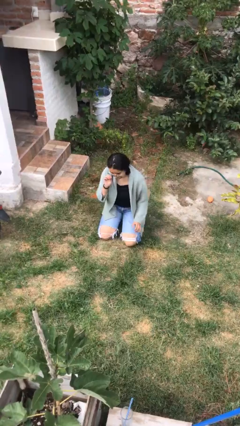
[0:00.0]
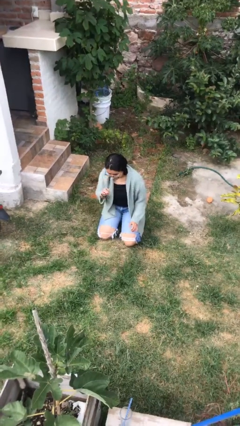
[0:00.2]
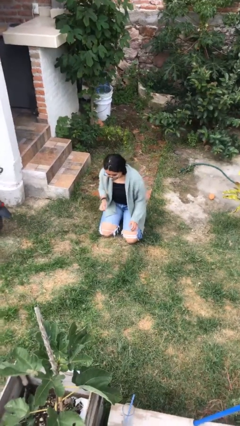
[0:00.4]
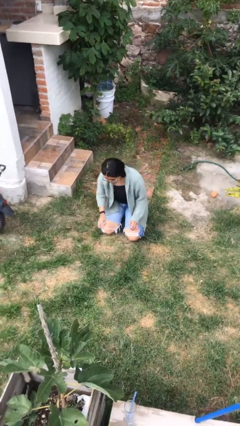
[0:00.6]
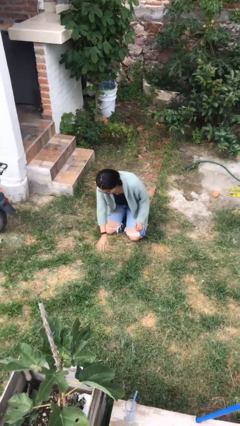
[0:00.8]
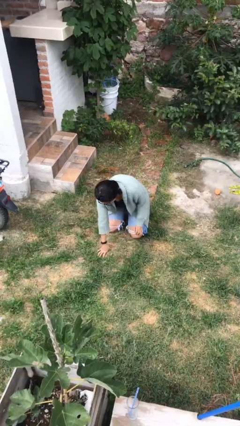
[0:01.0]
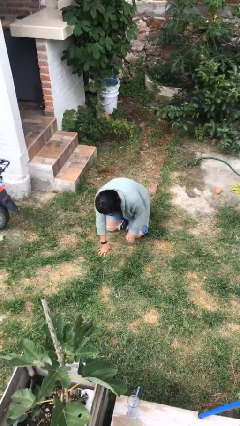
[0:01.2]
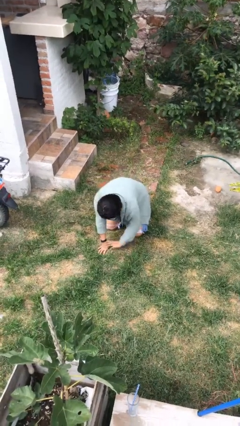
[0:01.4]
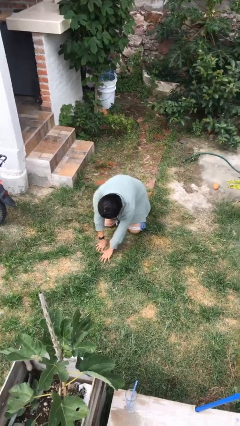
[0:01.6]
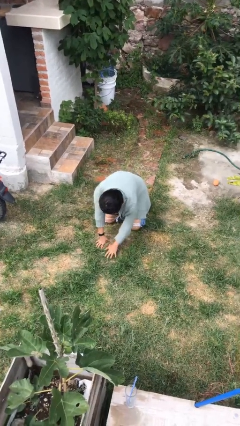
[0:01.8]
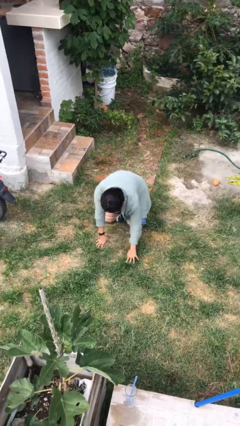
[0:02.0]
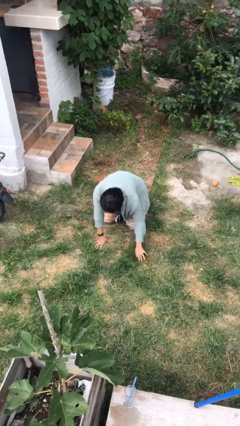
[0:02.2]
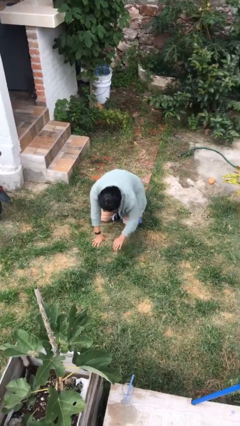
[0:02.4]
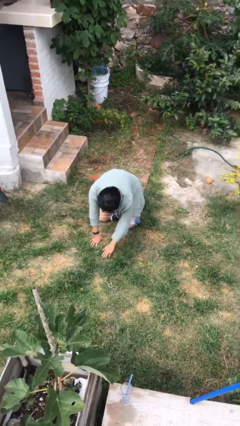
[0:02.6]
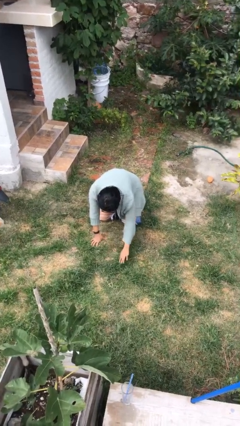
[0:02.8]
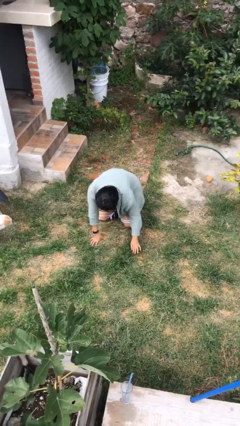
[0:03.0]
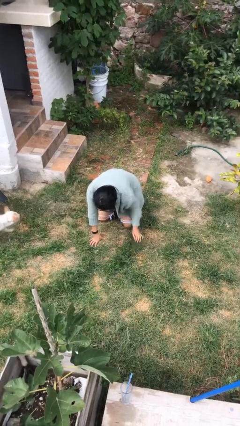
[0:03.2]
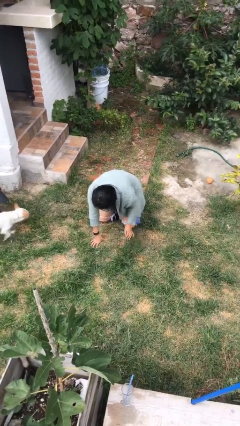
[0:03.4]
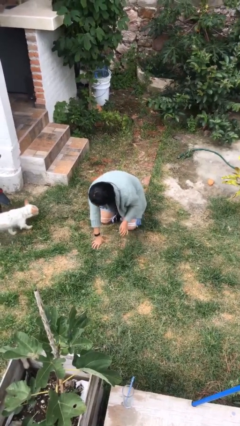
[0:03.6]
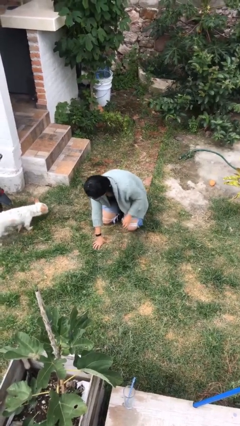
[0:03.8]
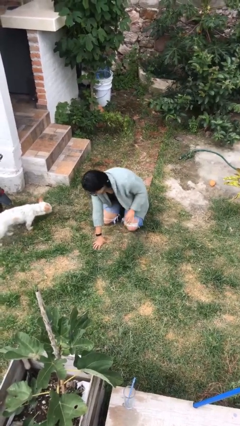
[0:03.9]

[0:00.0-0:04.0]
person crawls

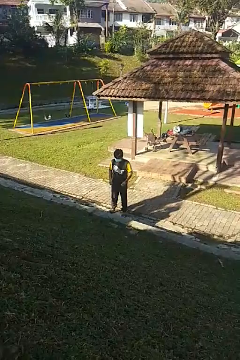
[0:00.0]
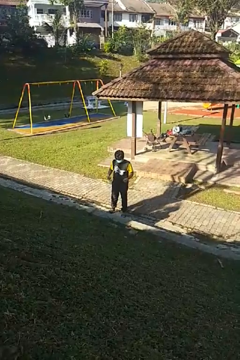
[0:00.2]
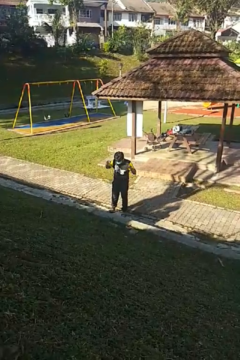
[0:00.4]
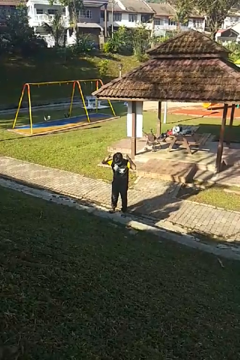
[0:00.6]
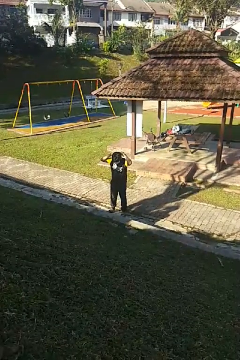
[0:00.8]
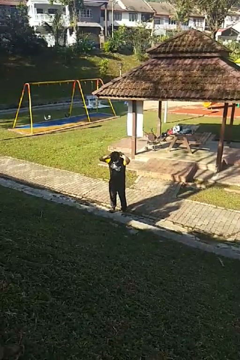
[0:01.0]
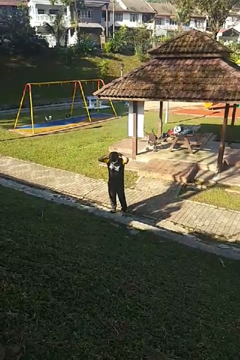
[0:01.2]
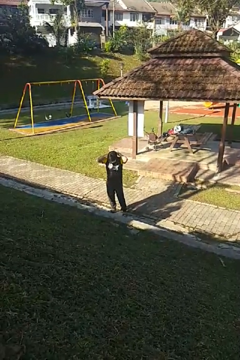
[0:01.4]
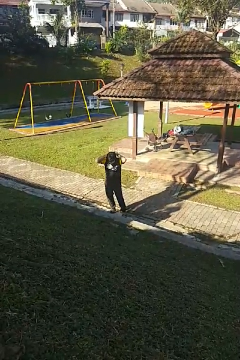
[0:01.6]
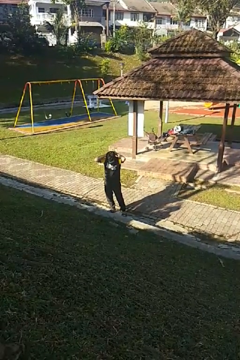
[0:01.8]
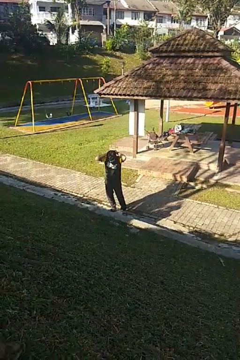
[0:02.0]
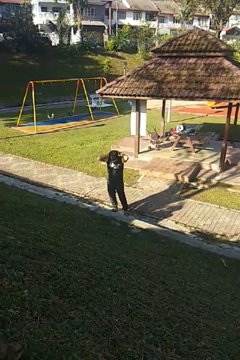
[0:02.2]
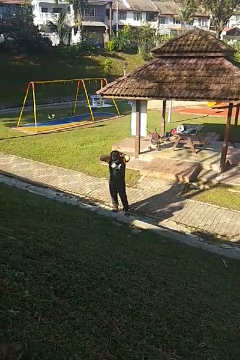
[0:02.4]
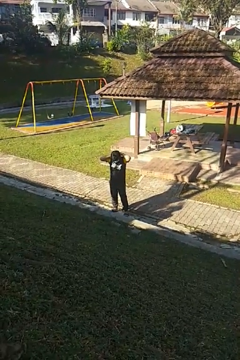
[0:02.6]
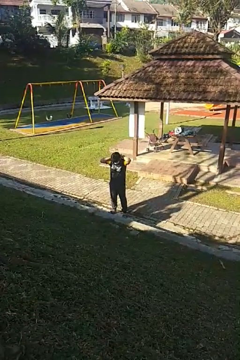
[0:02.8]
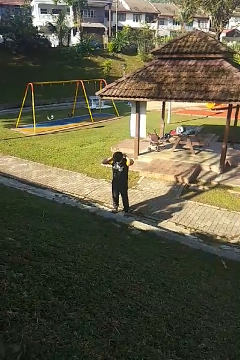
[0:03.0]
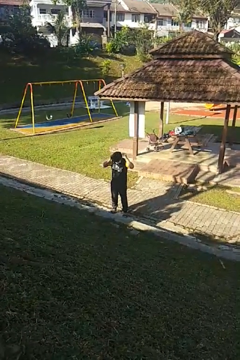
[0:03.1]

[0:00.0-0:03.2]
person puts on necklace

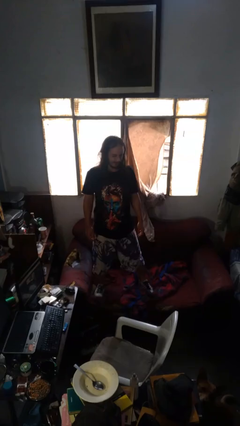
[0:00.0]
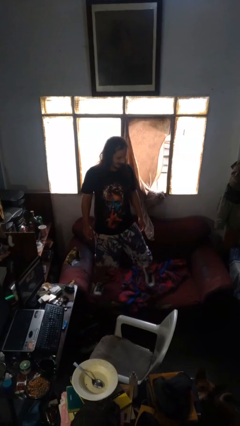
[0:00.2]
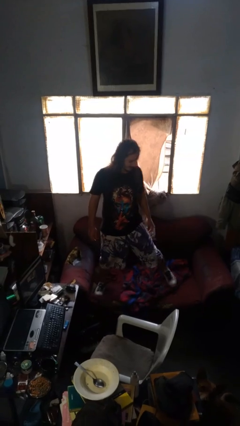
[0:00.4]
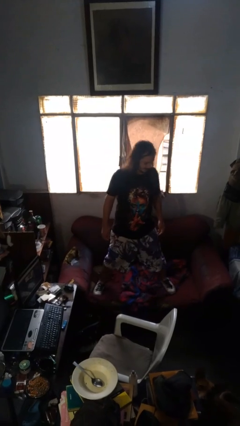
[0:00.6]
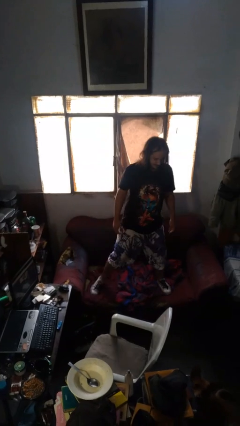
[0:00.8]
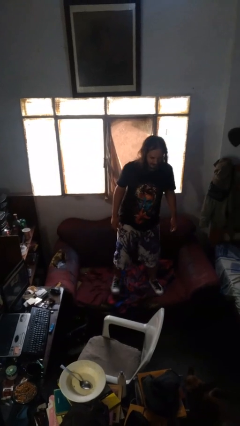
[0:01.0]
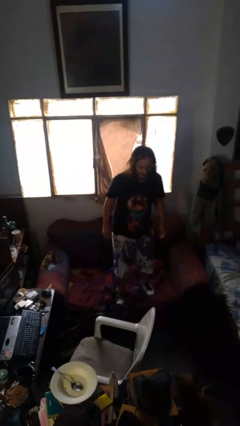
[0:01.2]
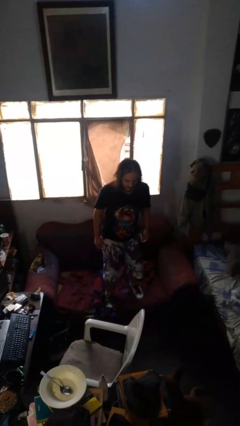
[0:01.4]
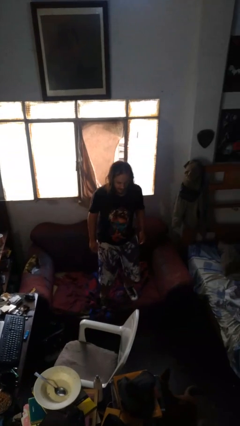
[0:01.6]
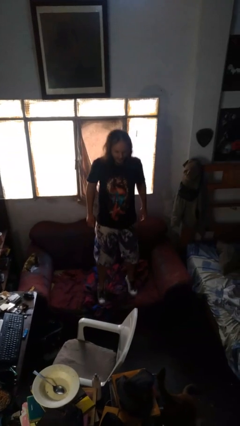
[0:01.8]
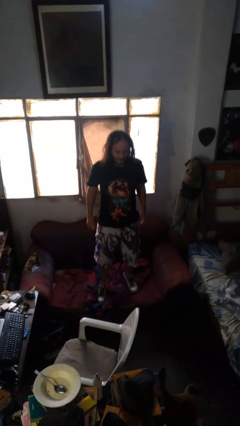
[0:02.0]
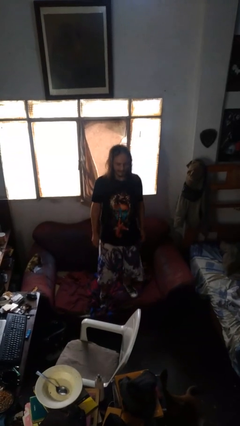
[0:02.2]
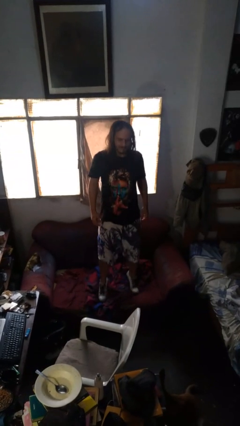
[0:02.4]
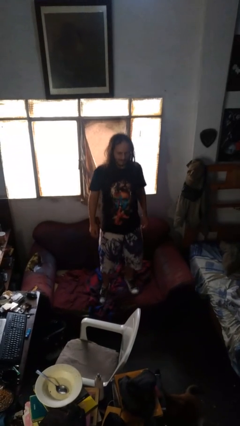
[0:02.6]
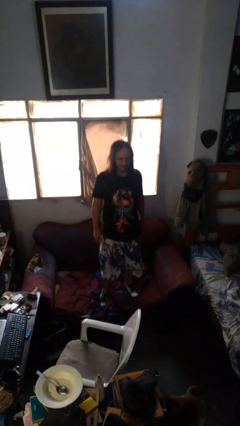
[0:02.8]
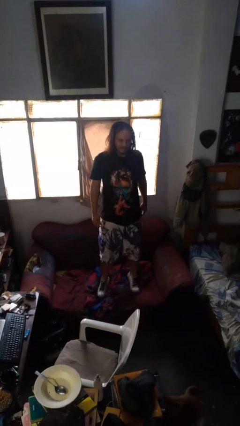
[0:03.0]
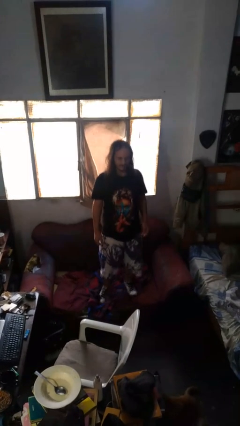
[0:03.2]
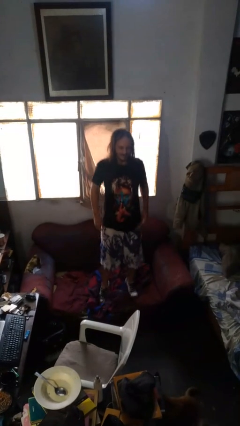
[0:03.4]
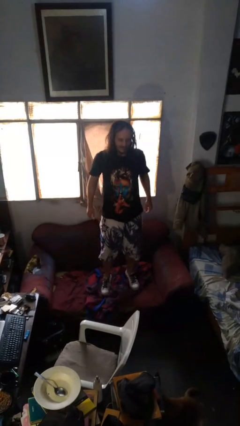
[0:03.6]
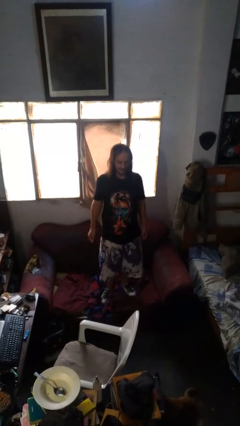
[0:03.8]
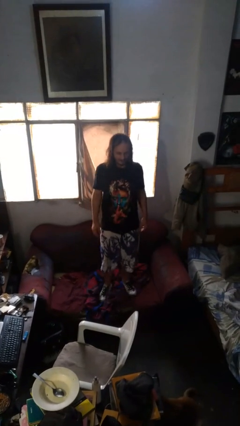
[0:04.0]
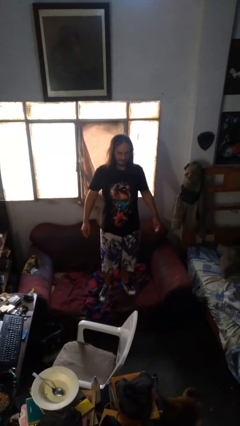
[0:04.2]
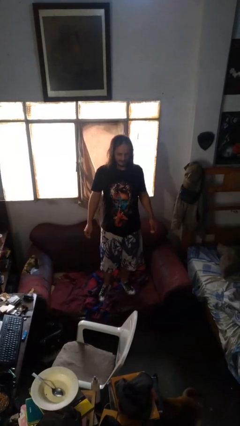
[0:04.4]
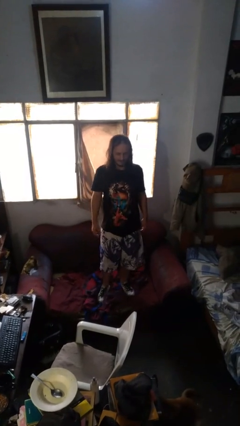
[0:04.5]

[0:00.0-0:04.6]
person jumps on couch

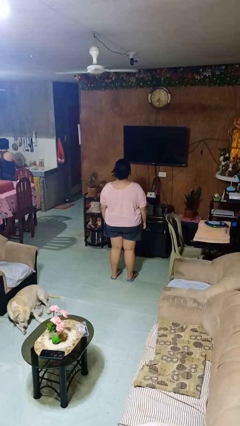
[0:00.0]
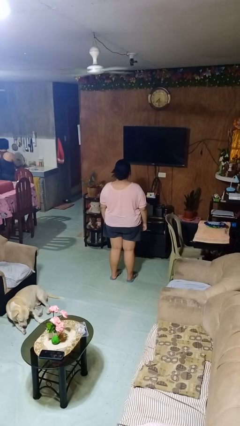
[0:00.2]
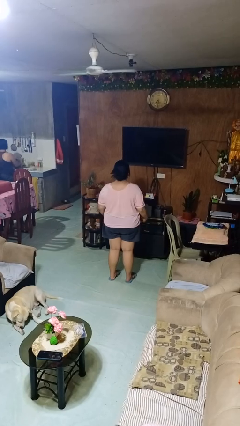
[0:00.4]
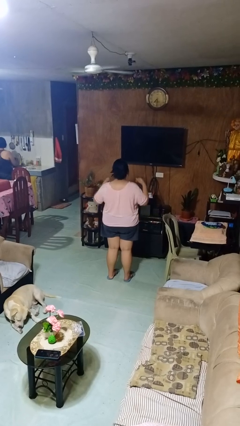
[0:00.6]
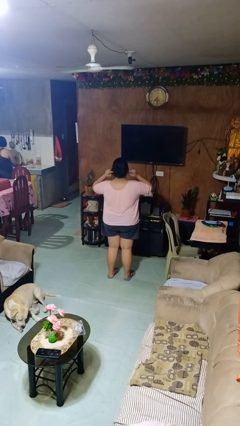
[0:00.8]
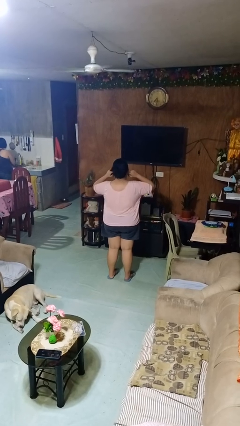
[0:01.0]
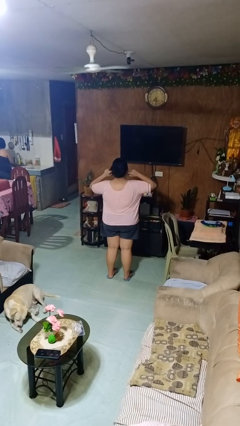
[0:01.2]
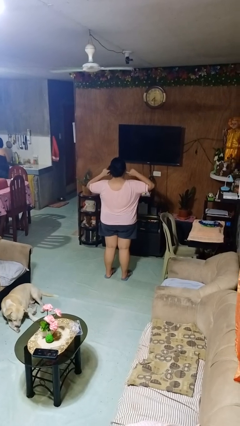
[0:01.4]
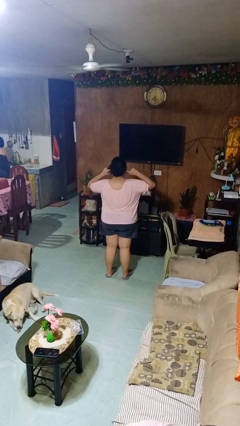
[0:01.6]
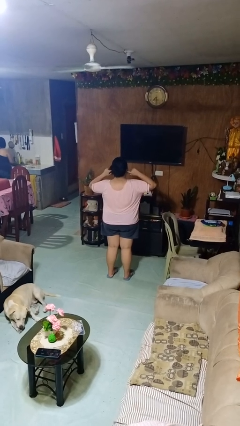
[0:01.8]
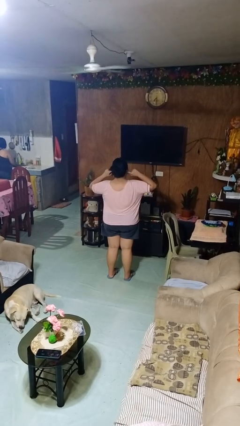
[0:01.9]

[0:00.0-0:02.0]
person puts fingers in ear

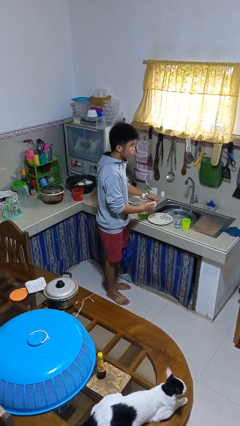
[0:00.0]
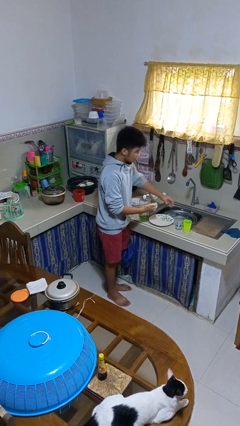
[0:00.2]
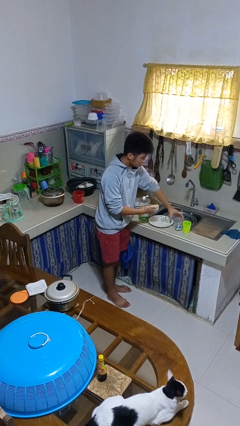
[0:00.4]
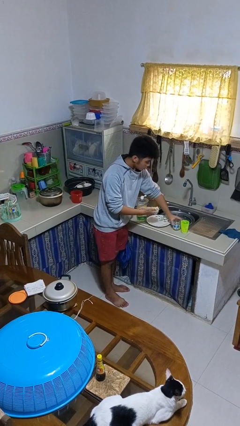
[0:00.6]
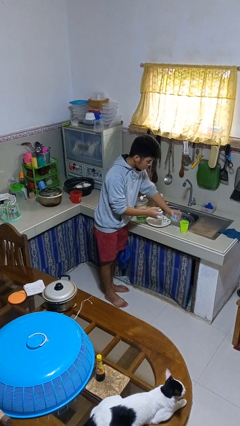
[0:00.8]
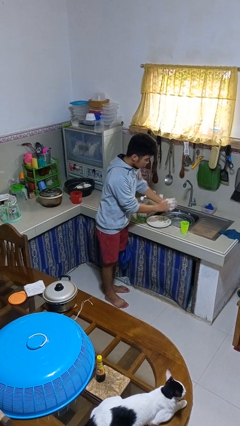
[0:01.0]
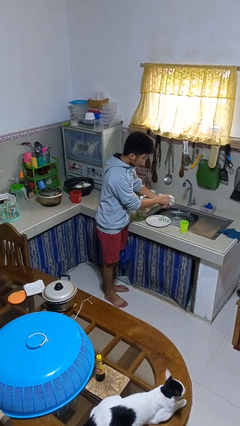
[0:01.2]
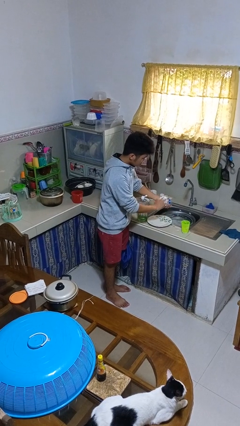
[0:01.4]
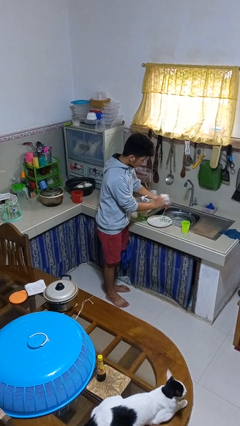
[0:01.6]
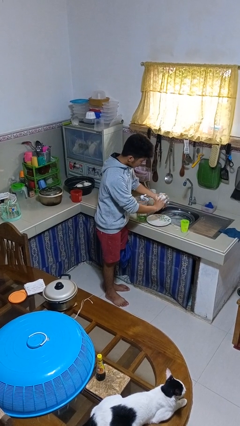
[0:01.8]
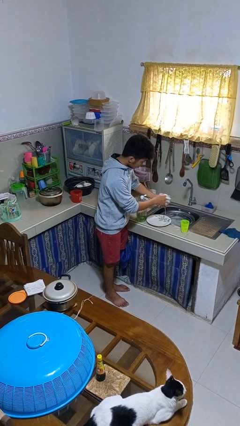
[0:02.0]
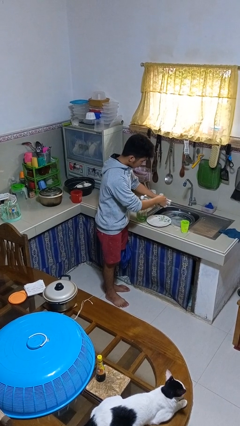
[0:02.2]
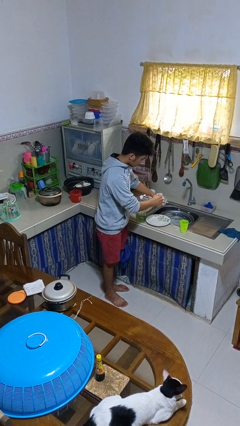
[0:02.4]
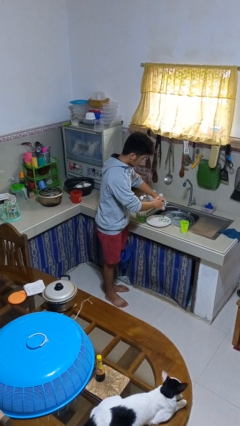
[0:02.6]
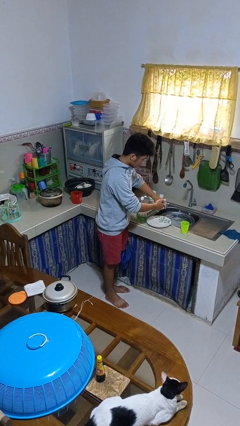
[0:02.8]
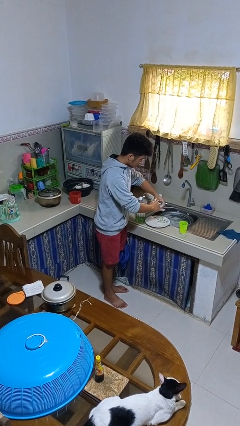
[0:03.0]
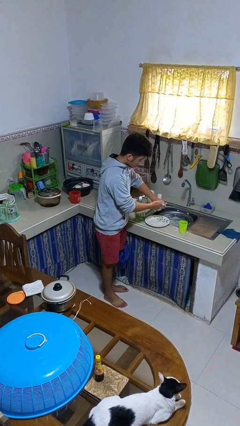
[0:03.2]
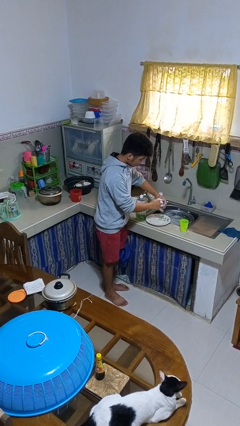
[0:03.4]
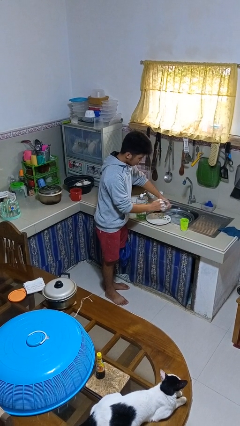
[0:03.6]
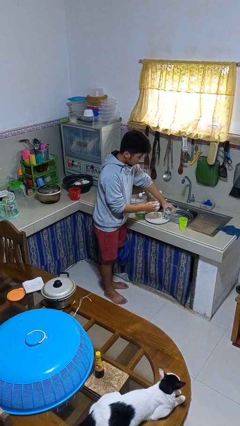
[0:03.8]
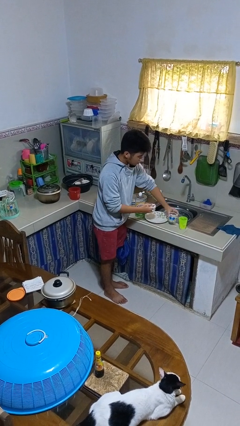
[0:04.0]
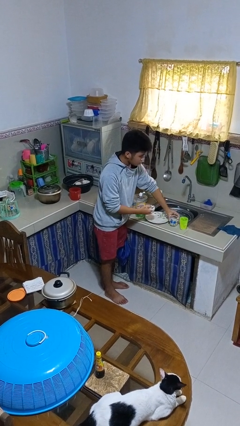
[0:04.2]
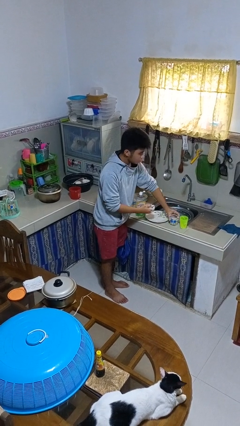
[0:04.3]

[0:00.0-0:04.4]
person washes dish

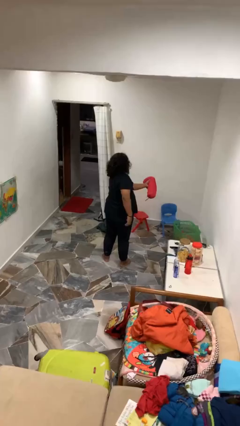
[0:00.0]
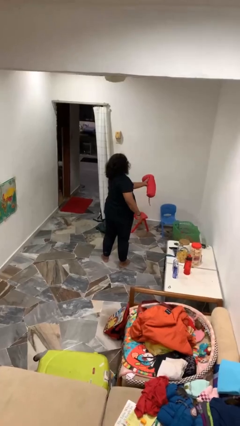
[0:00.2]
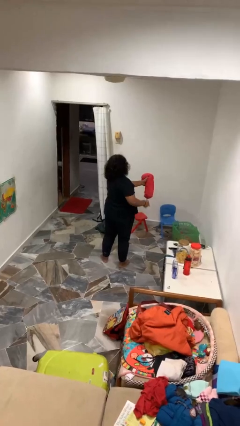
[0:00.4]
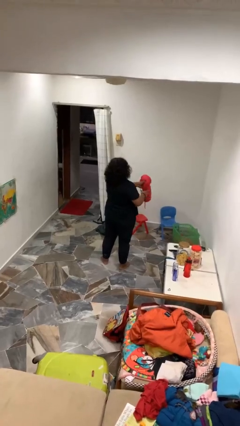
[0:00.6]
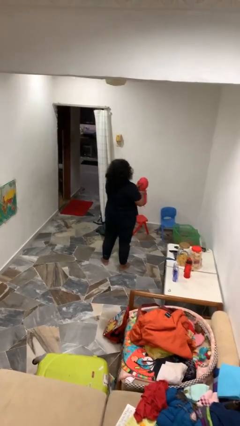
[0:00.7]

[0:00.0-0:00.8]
person catches dropped object
